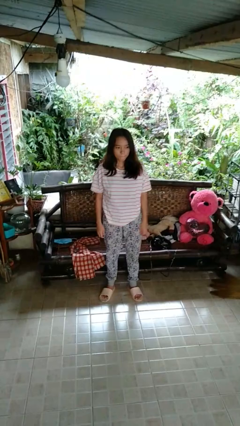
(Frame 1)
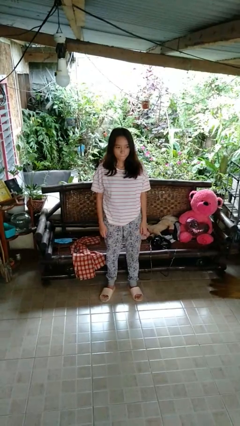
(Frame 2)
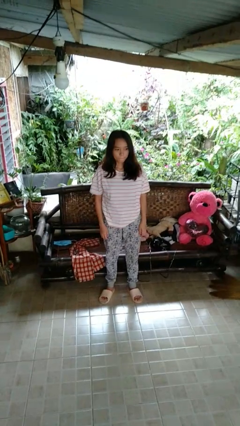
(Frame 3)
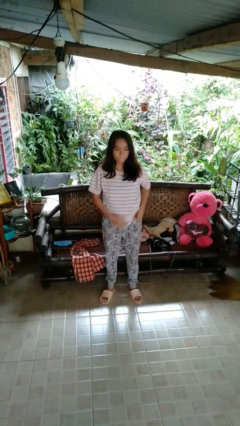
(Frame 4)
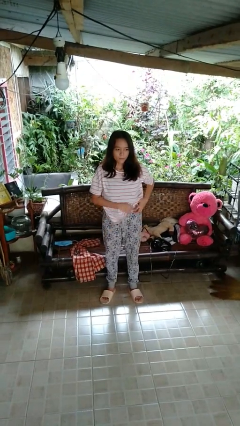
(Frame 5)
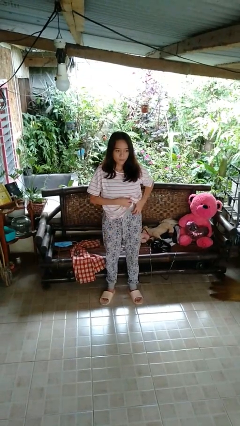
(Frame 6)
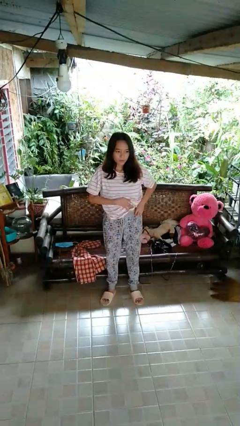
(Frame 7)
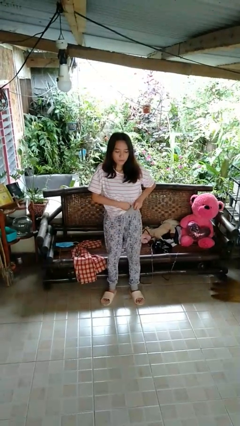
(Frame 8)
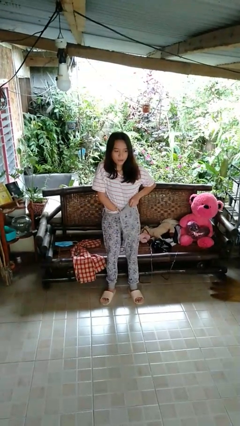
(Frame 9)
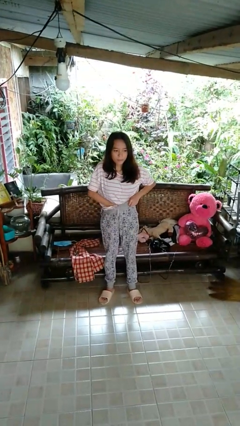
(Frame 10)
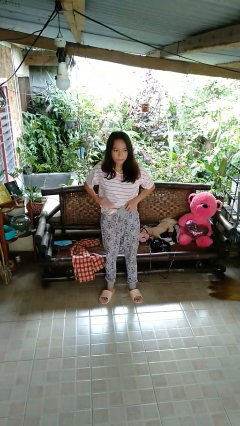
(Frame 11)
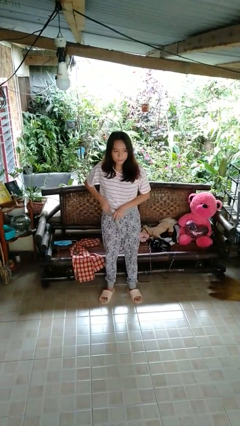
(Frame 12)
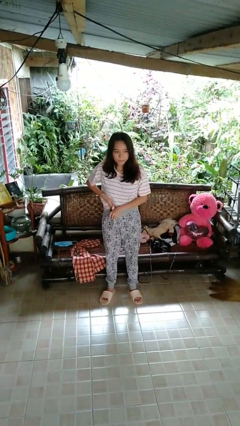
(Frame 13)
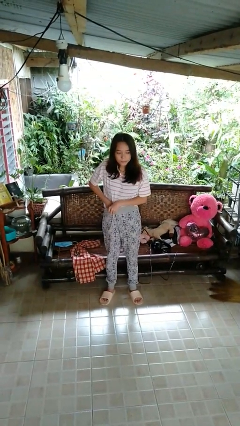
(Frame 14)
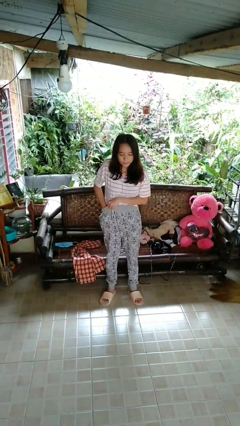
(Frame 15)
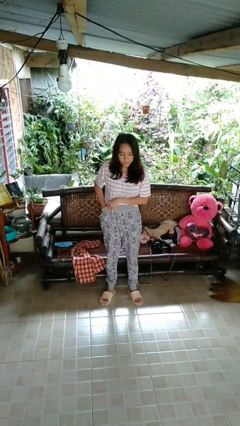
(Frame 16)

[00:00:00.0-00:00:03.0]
person tucks in shirt

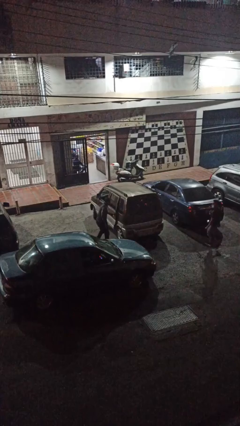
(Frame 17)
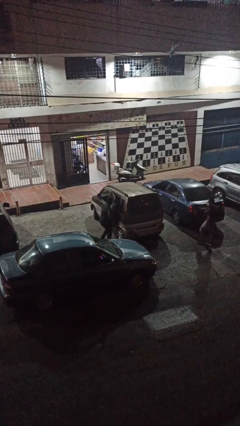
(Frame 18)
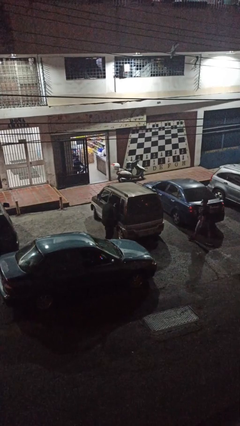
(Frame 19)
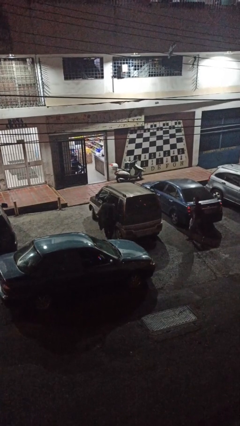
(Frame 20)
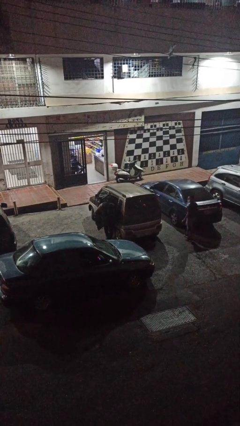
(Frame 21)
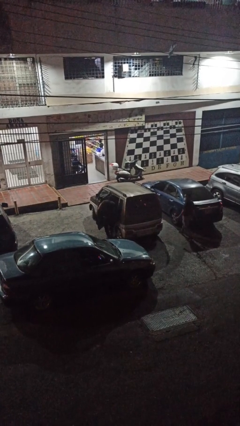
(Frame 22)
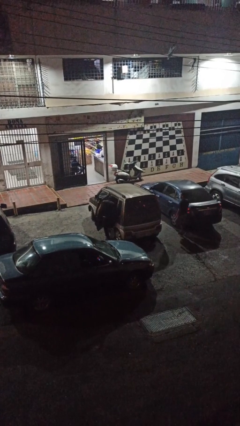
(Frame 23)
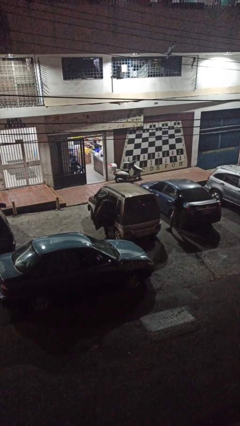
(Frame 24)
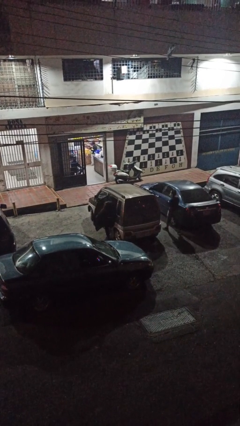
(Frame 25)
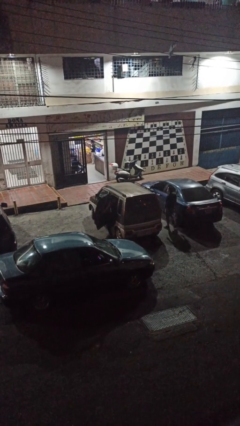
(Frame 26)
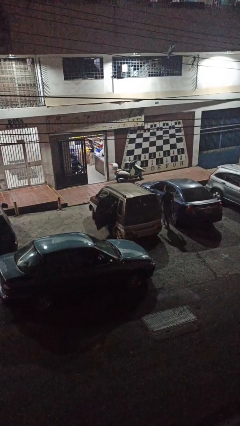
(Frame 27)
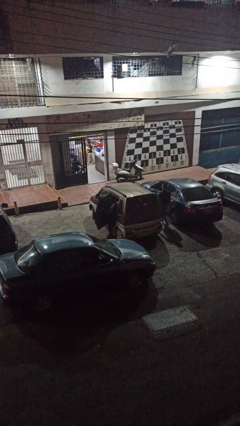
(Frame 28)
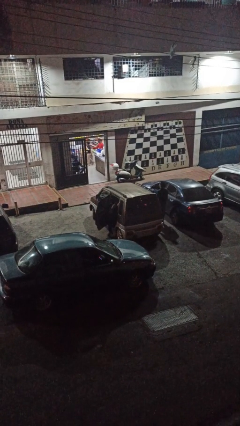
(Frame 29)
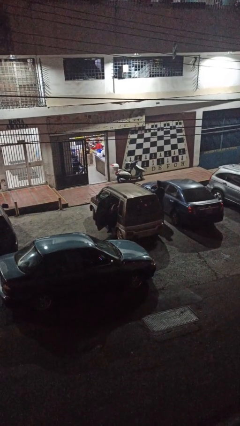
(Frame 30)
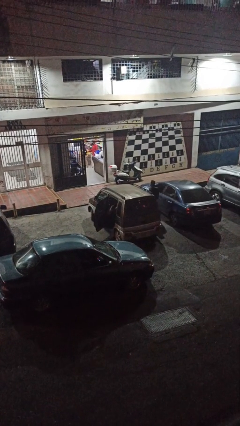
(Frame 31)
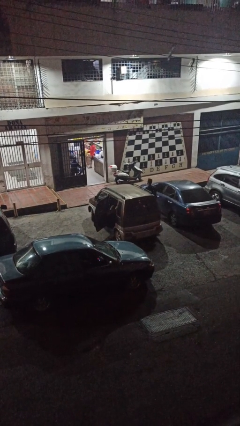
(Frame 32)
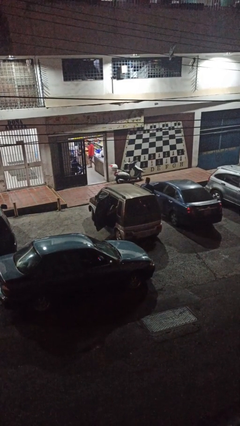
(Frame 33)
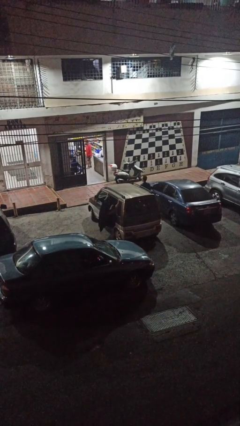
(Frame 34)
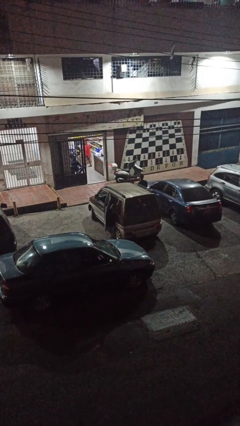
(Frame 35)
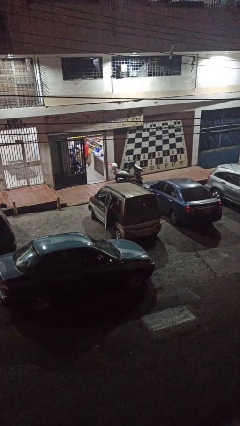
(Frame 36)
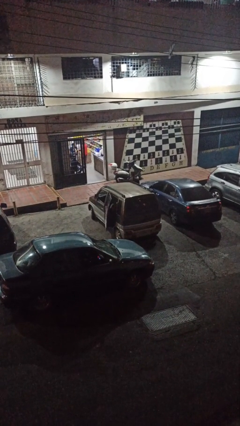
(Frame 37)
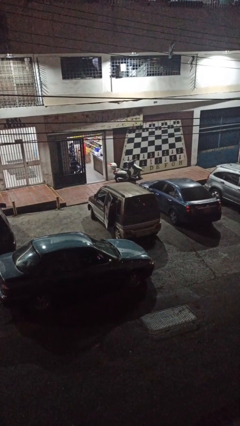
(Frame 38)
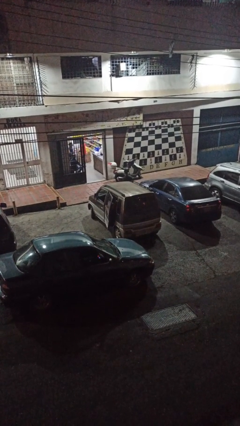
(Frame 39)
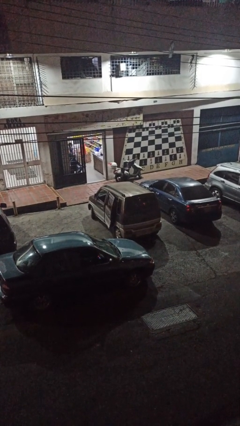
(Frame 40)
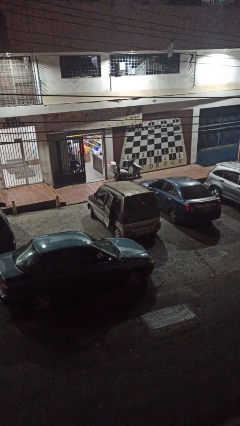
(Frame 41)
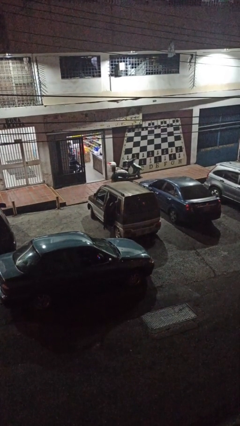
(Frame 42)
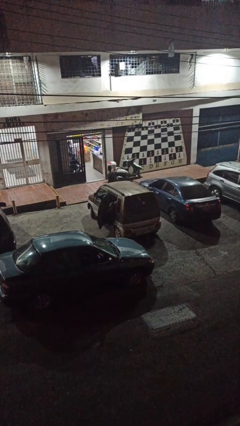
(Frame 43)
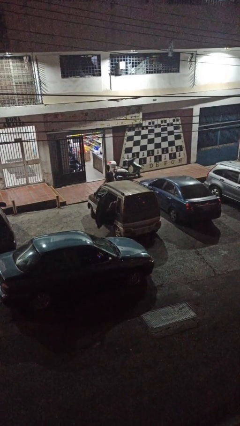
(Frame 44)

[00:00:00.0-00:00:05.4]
car picks up person

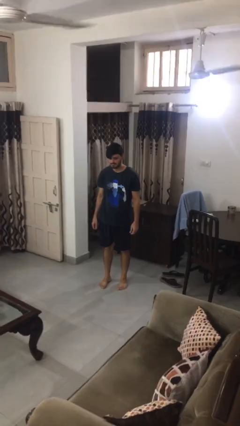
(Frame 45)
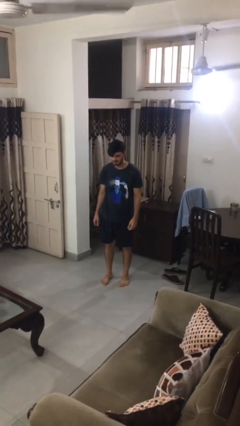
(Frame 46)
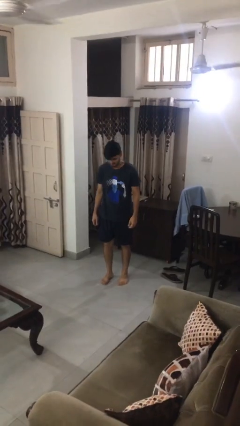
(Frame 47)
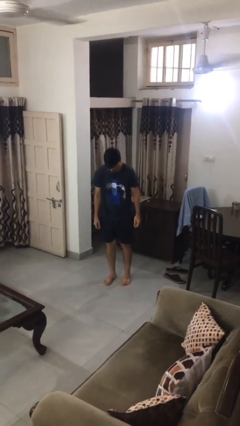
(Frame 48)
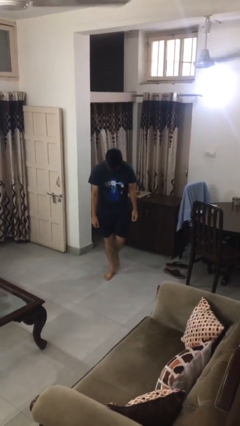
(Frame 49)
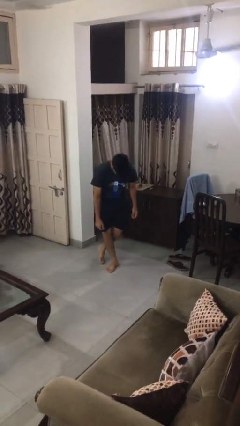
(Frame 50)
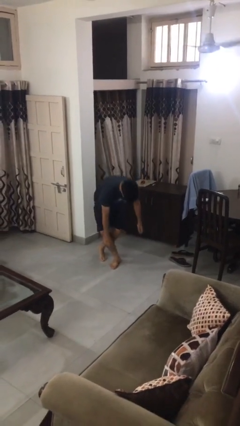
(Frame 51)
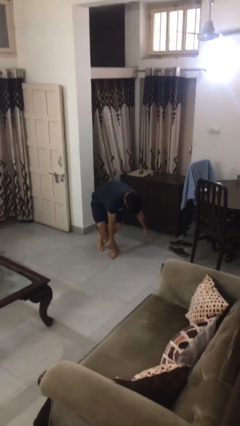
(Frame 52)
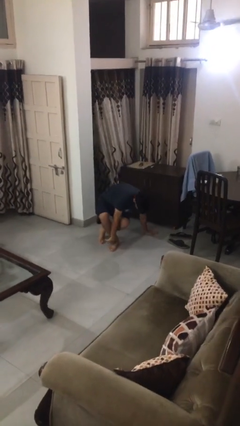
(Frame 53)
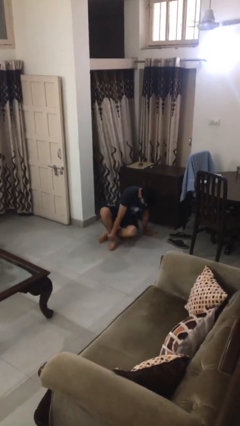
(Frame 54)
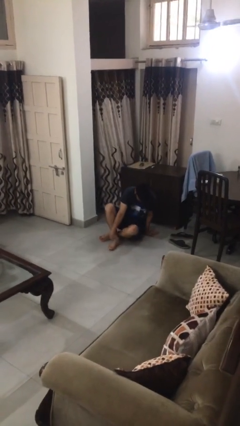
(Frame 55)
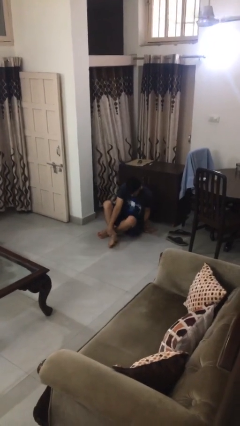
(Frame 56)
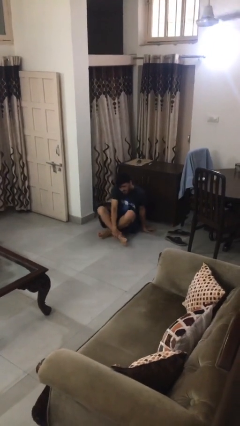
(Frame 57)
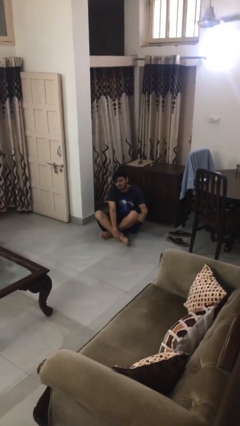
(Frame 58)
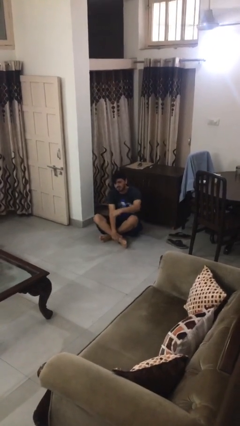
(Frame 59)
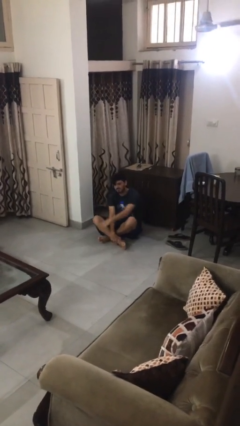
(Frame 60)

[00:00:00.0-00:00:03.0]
person sits crisscross

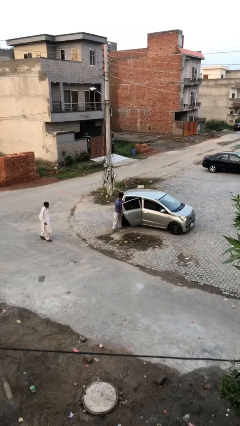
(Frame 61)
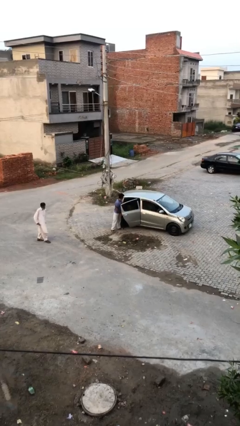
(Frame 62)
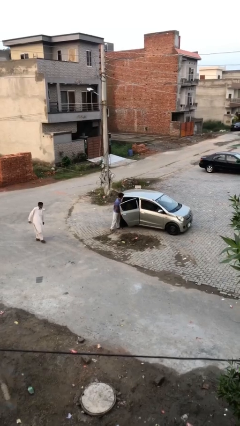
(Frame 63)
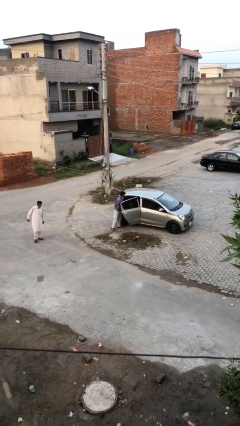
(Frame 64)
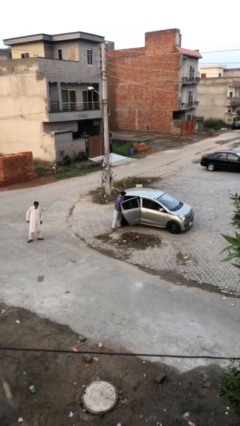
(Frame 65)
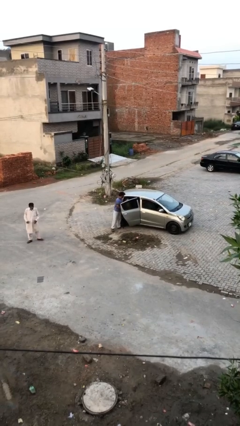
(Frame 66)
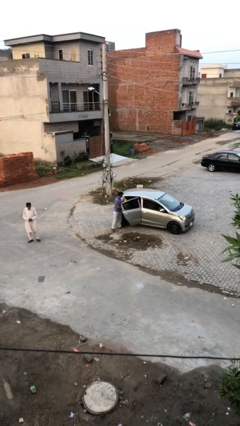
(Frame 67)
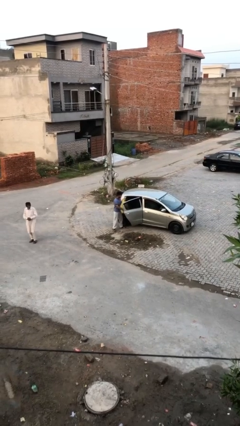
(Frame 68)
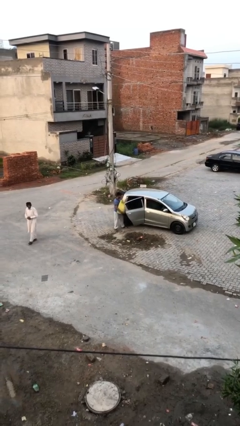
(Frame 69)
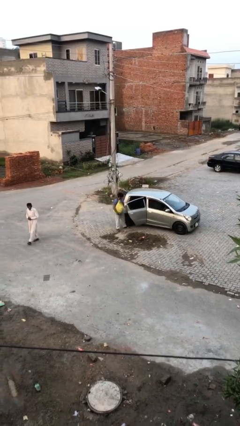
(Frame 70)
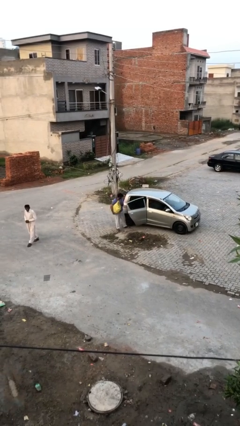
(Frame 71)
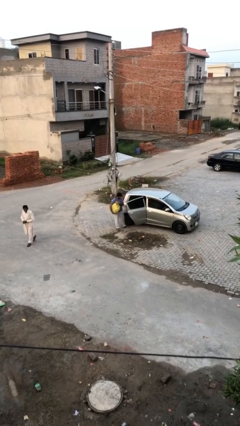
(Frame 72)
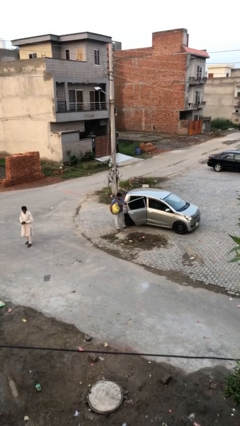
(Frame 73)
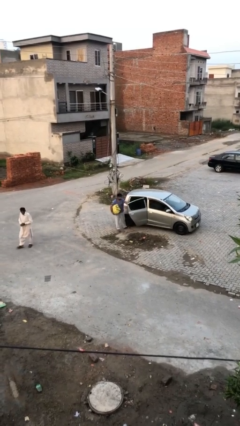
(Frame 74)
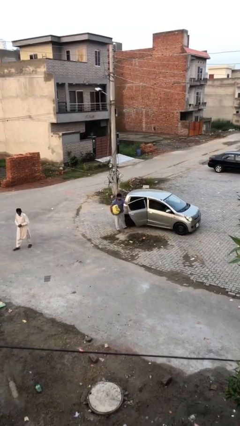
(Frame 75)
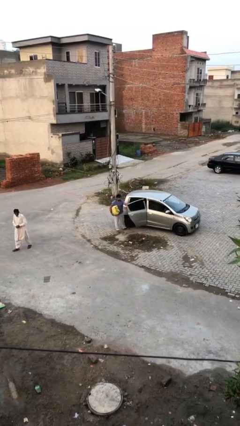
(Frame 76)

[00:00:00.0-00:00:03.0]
person unloads car

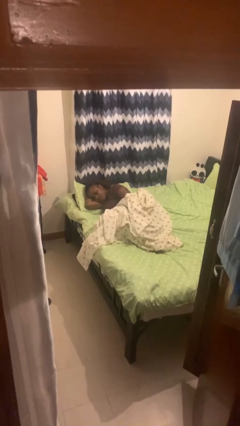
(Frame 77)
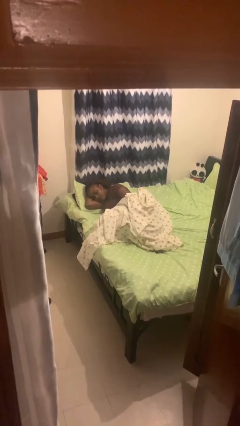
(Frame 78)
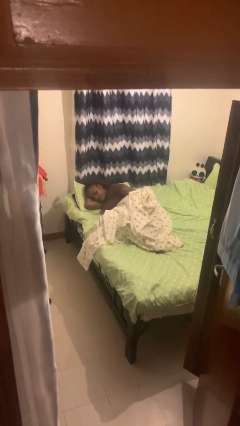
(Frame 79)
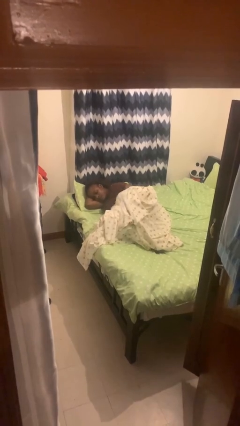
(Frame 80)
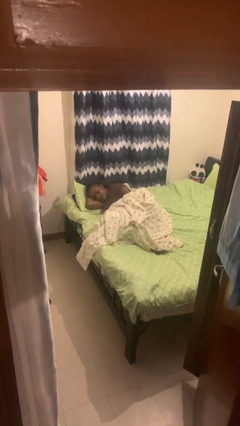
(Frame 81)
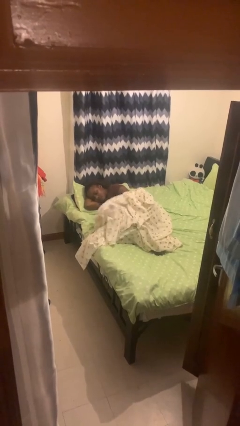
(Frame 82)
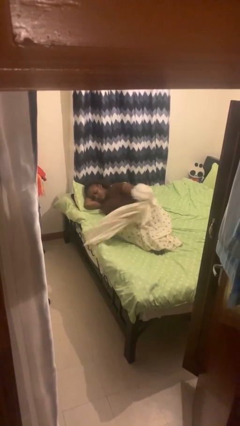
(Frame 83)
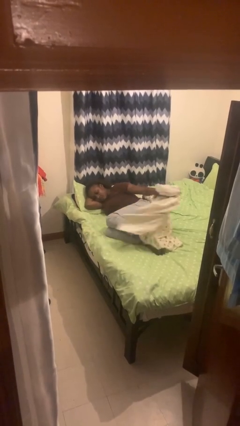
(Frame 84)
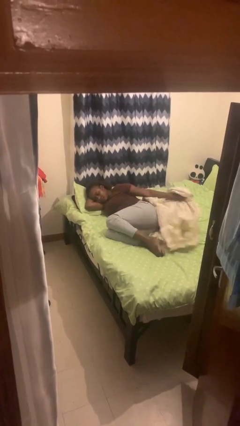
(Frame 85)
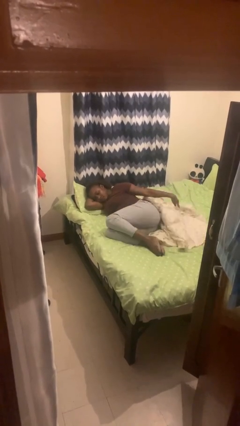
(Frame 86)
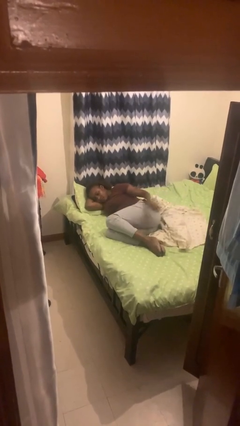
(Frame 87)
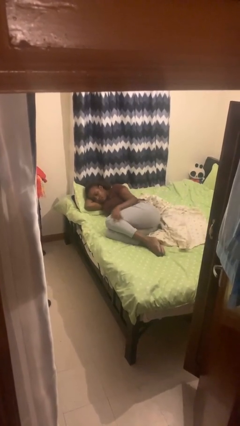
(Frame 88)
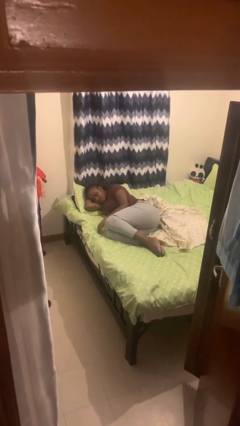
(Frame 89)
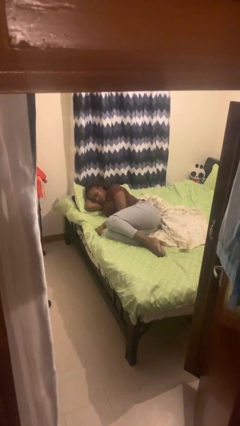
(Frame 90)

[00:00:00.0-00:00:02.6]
person uncovers with bedsheets

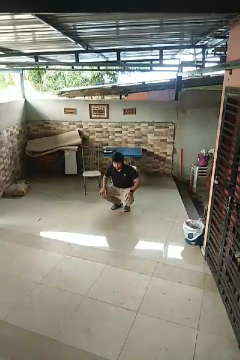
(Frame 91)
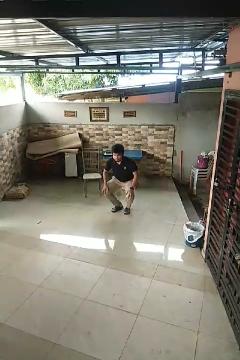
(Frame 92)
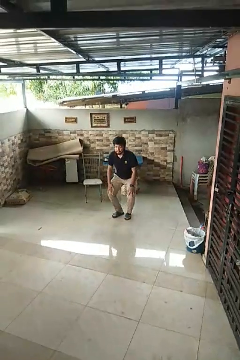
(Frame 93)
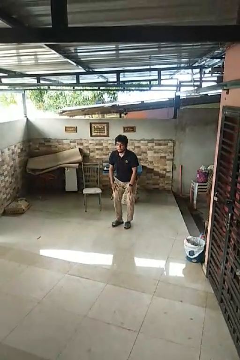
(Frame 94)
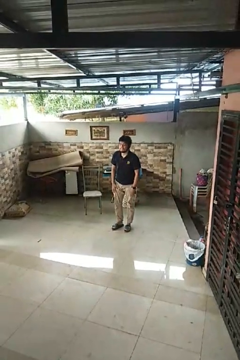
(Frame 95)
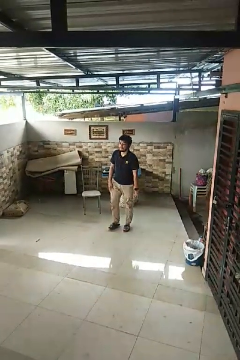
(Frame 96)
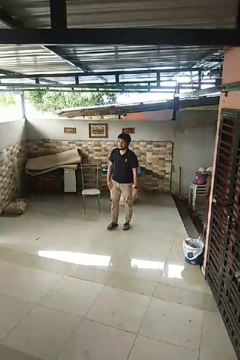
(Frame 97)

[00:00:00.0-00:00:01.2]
person stands up
